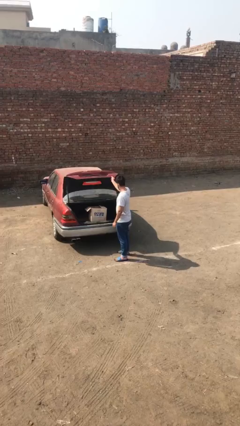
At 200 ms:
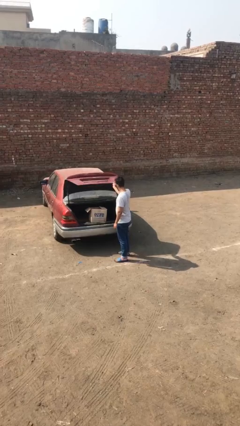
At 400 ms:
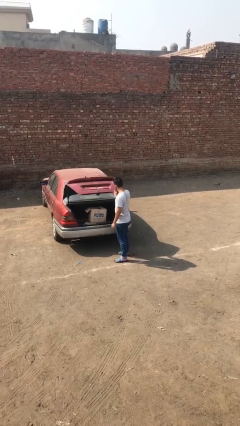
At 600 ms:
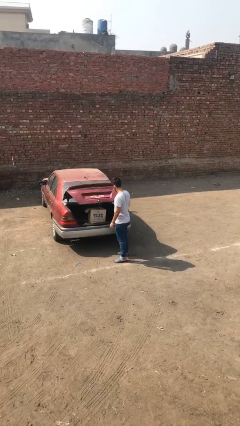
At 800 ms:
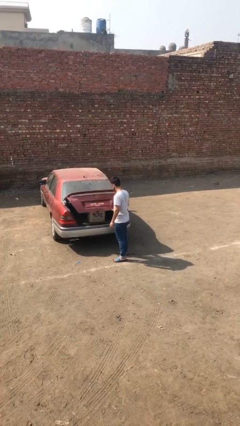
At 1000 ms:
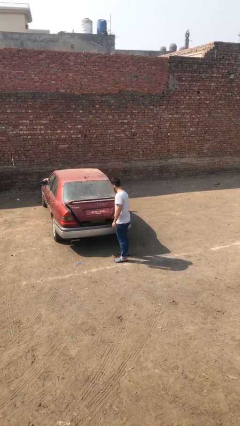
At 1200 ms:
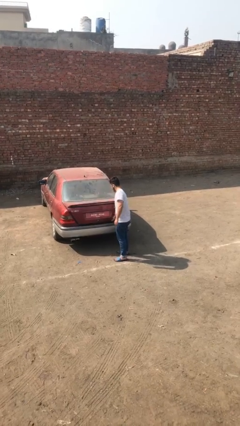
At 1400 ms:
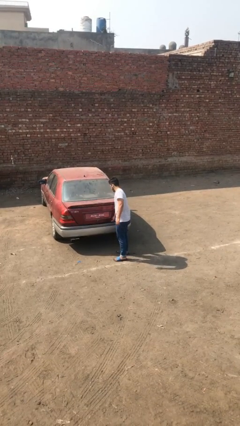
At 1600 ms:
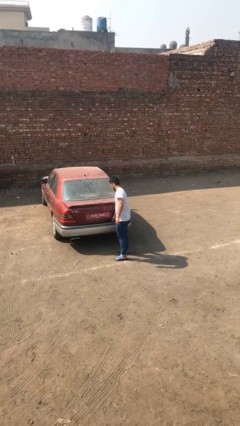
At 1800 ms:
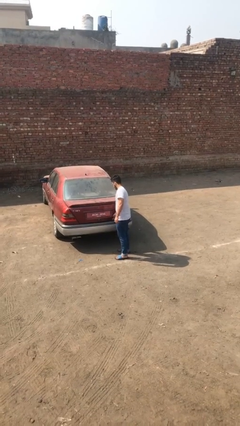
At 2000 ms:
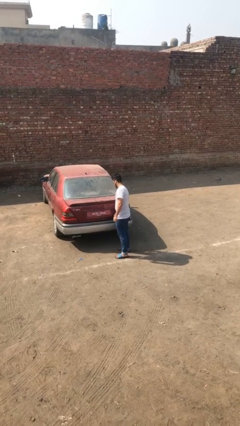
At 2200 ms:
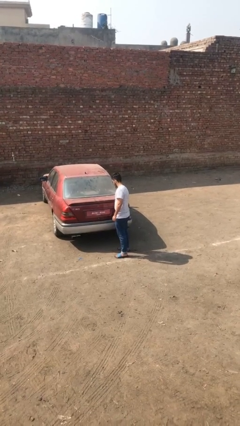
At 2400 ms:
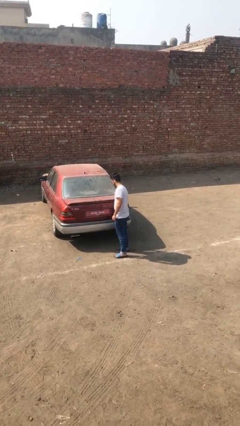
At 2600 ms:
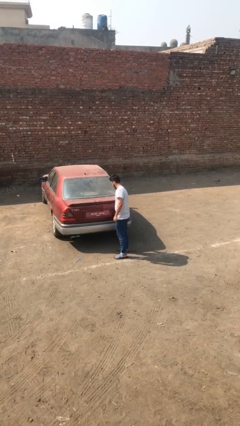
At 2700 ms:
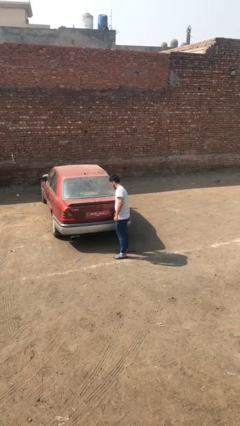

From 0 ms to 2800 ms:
person closes car trunk

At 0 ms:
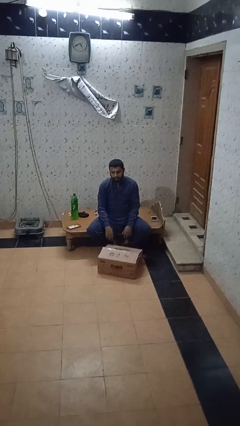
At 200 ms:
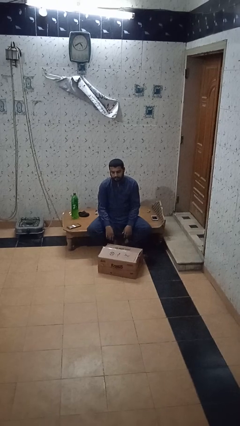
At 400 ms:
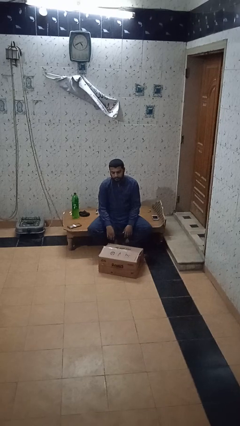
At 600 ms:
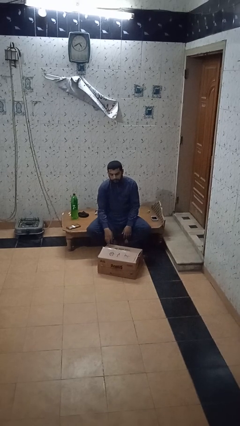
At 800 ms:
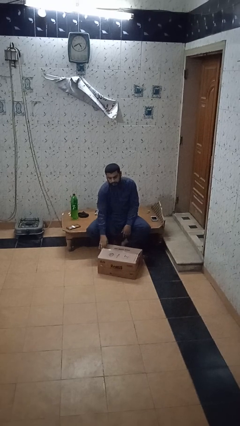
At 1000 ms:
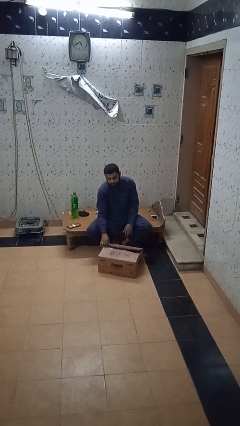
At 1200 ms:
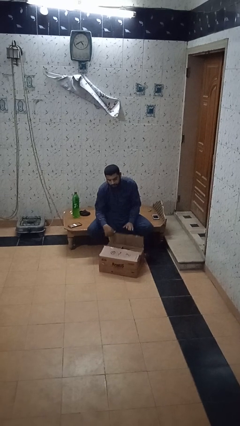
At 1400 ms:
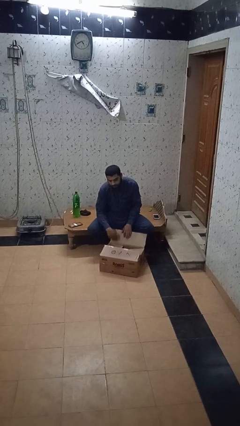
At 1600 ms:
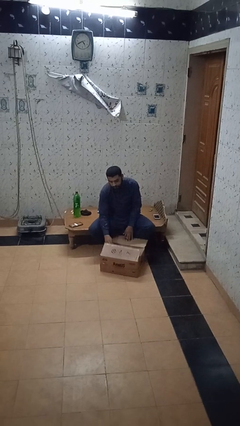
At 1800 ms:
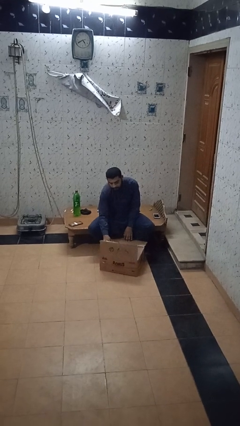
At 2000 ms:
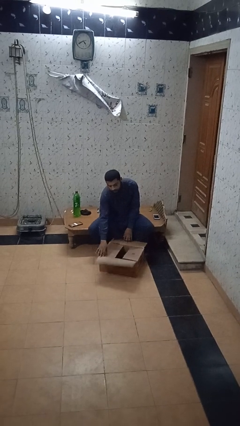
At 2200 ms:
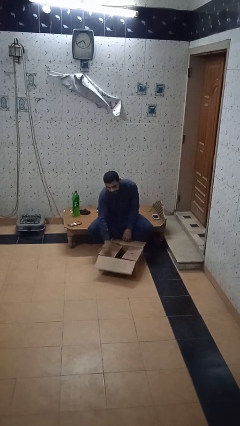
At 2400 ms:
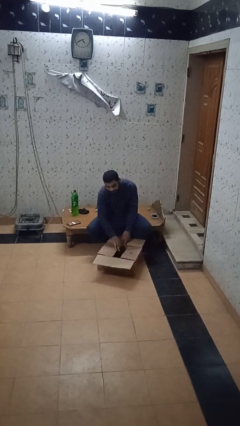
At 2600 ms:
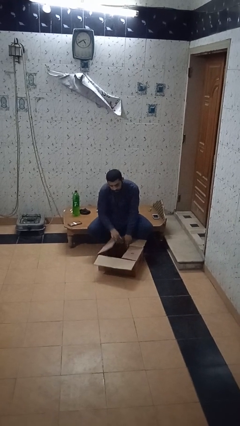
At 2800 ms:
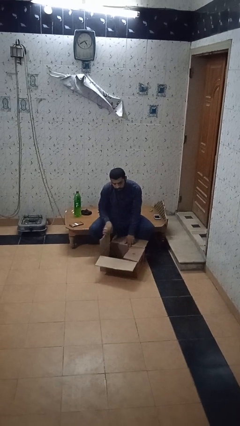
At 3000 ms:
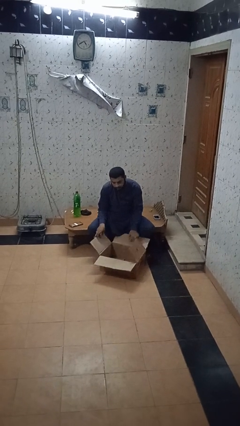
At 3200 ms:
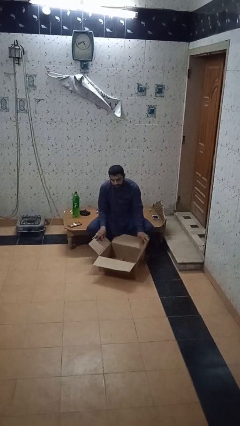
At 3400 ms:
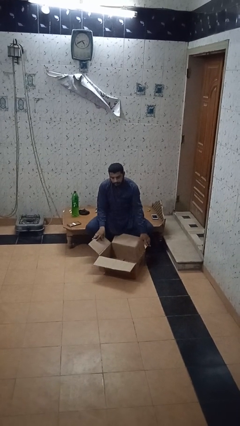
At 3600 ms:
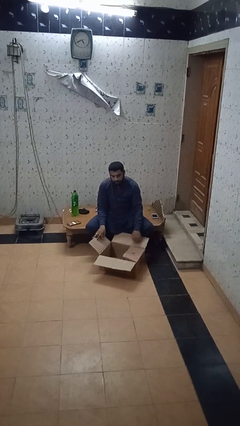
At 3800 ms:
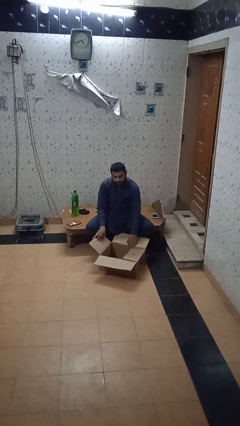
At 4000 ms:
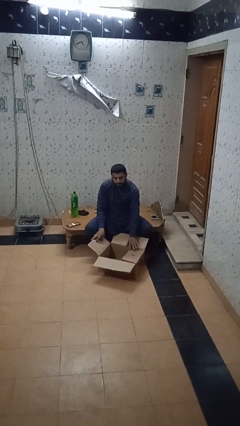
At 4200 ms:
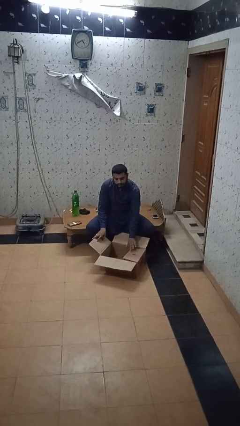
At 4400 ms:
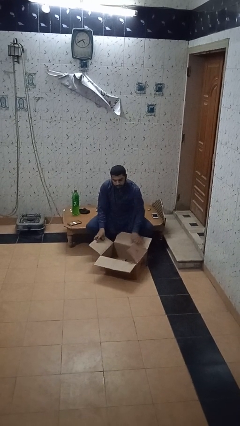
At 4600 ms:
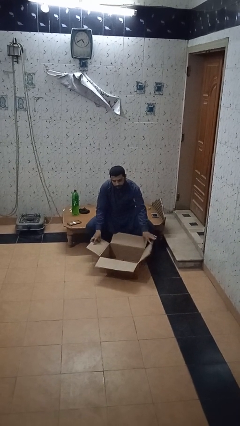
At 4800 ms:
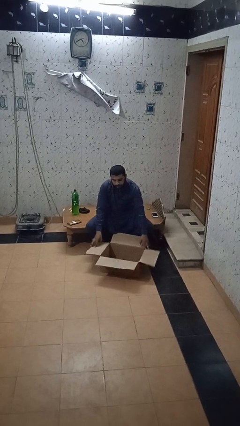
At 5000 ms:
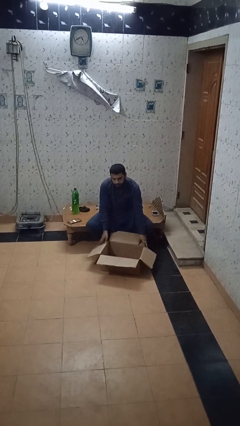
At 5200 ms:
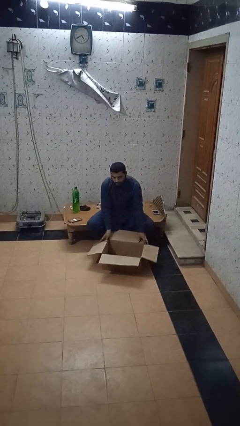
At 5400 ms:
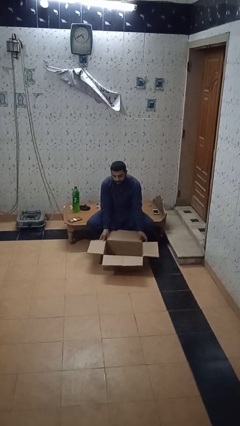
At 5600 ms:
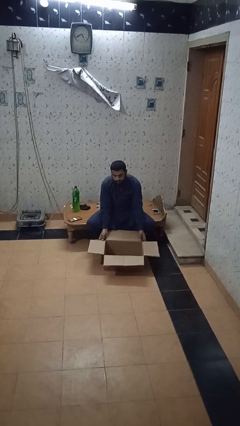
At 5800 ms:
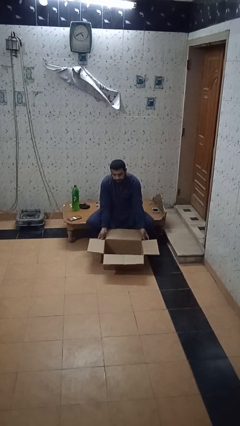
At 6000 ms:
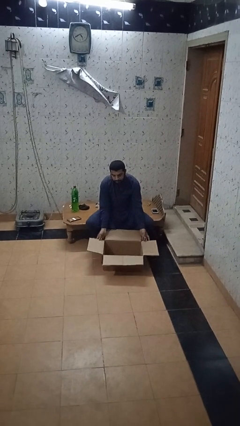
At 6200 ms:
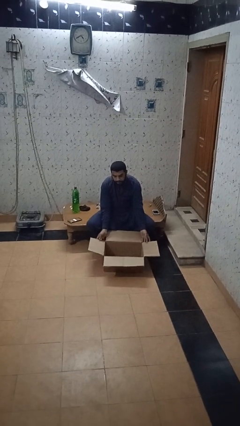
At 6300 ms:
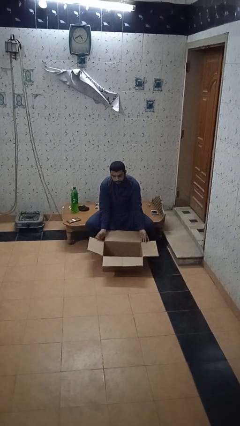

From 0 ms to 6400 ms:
person opens box

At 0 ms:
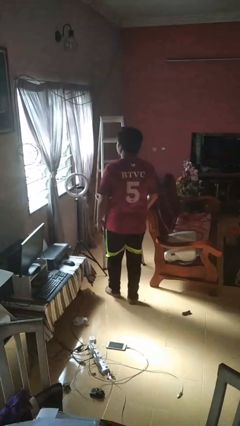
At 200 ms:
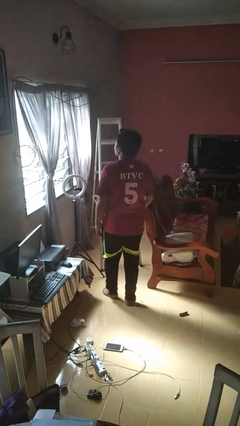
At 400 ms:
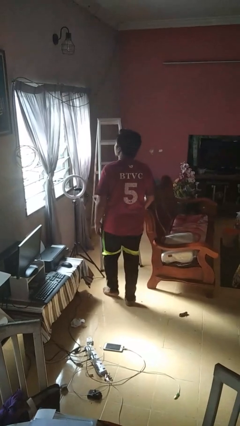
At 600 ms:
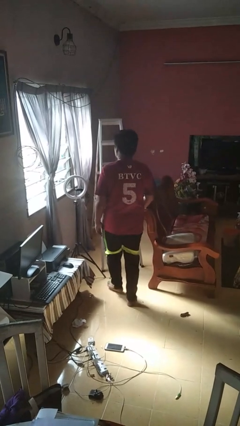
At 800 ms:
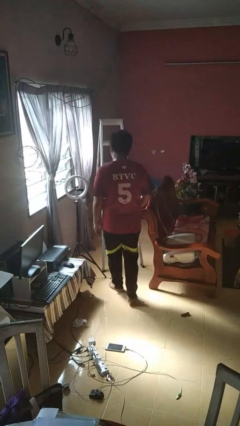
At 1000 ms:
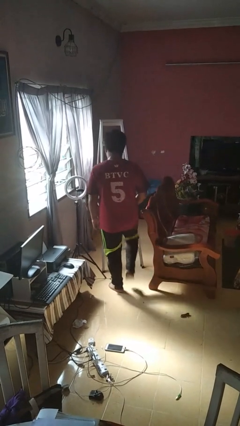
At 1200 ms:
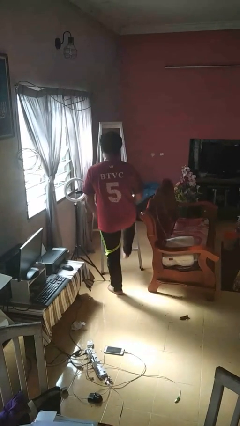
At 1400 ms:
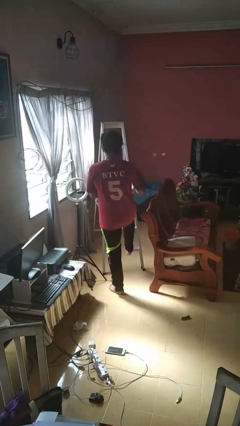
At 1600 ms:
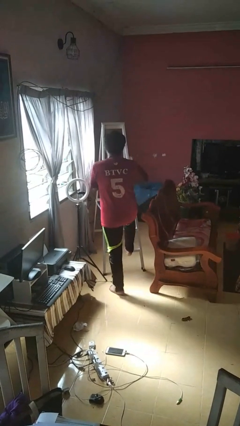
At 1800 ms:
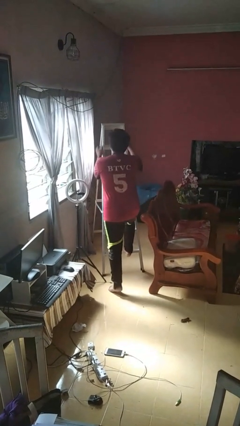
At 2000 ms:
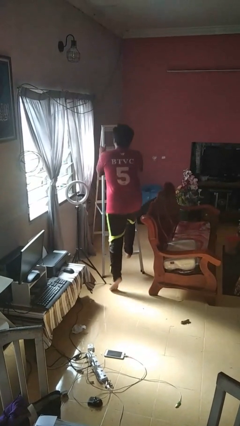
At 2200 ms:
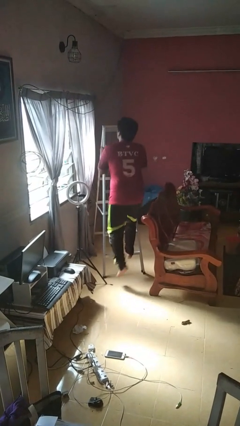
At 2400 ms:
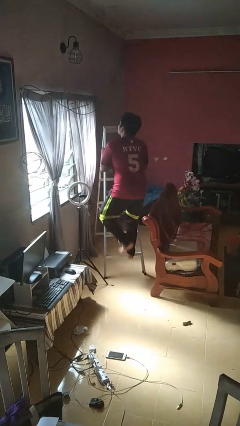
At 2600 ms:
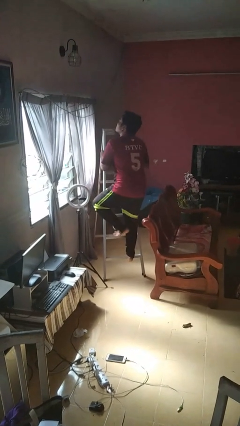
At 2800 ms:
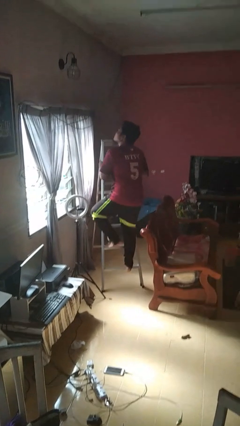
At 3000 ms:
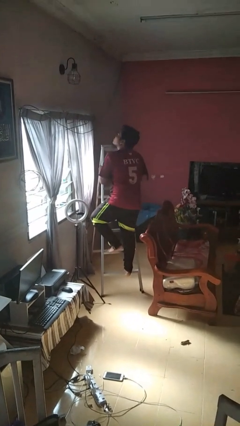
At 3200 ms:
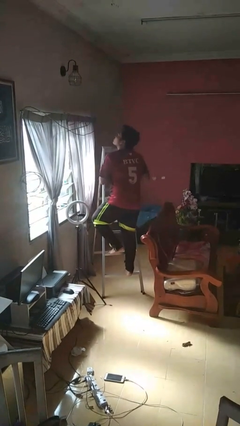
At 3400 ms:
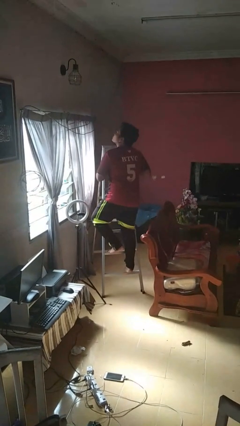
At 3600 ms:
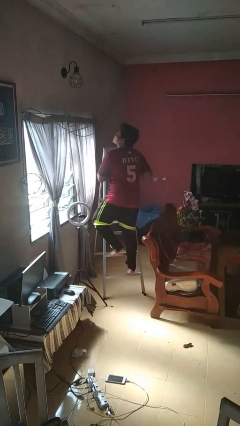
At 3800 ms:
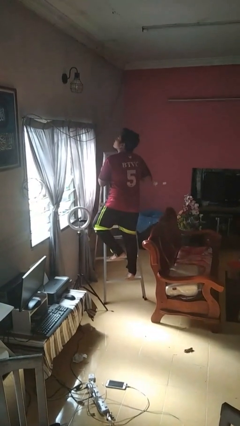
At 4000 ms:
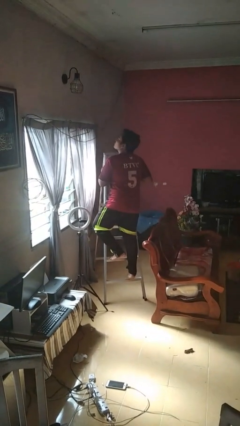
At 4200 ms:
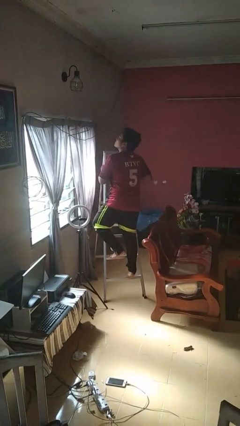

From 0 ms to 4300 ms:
person climbs up ladder

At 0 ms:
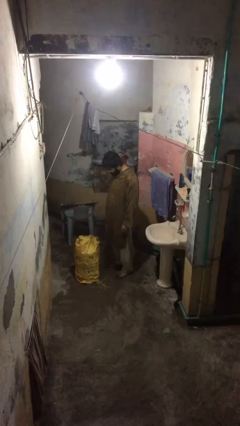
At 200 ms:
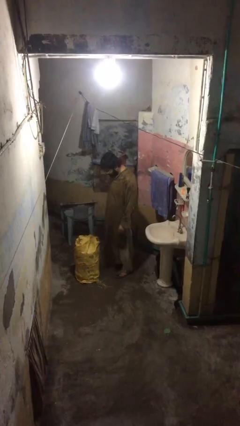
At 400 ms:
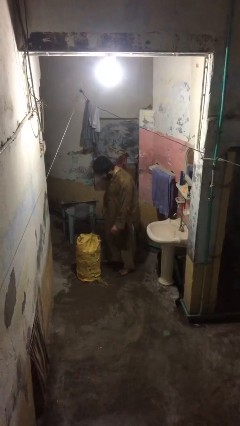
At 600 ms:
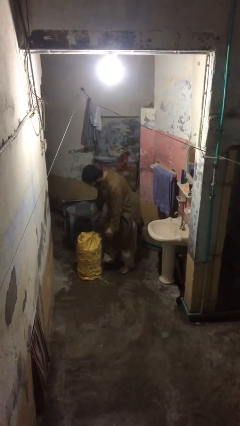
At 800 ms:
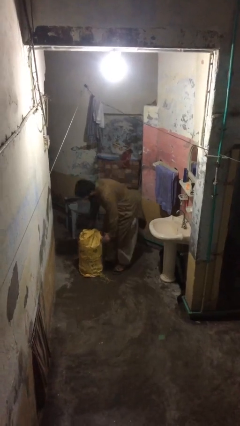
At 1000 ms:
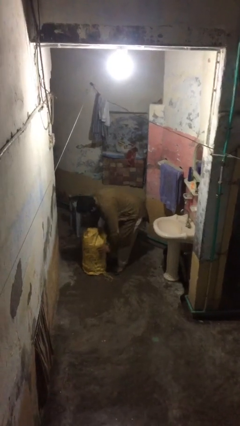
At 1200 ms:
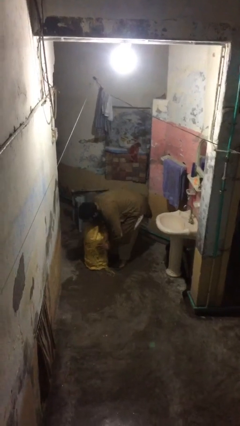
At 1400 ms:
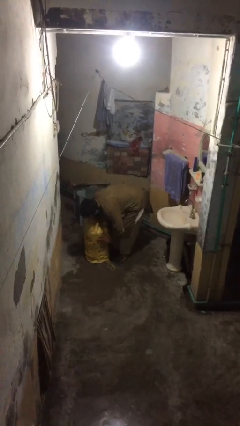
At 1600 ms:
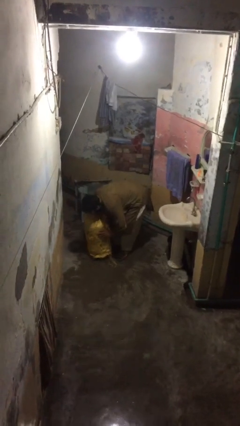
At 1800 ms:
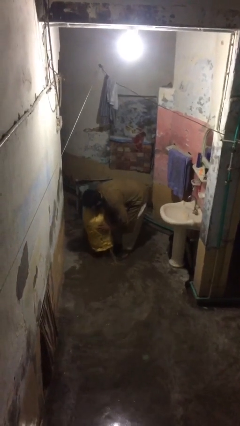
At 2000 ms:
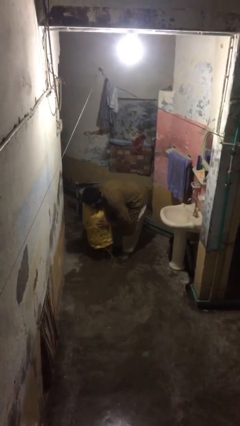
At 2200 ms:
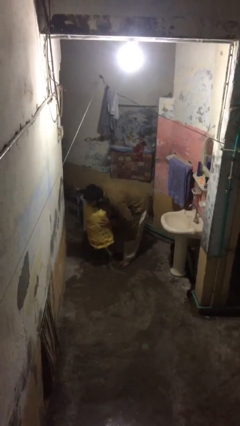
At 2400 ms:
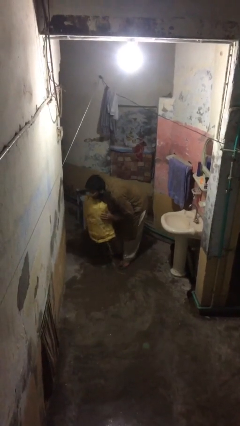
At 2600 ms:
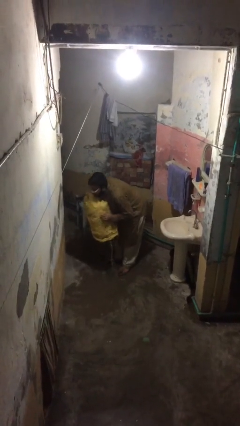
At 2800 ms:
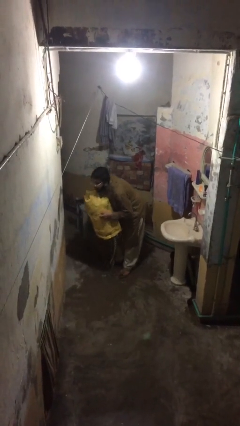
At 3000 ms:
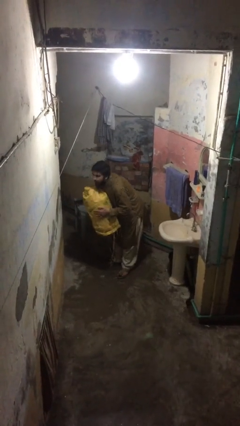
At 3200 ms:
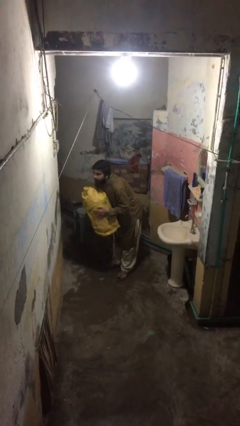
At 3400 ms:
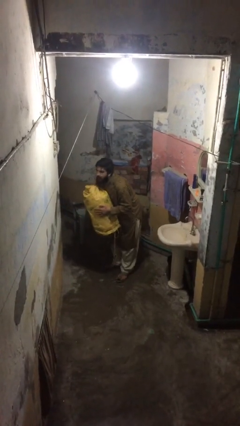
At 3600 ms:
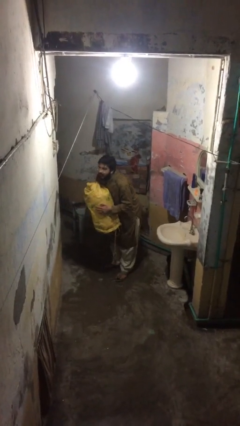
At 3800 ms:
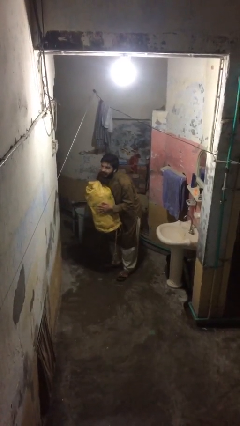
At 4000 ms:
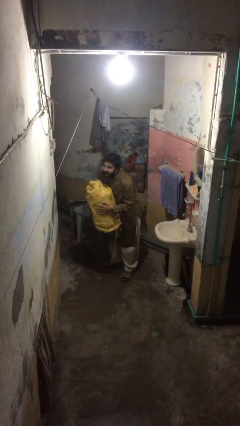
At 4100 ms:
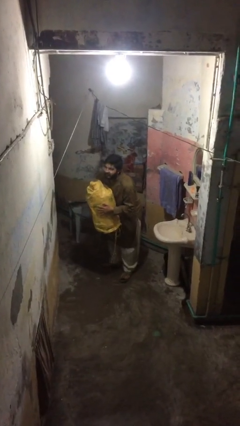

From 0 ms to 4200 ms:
person picks up object from floor
